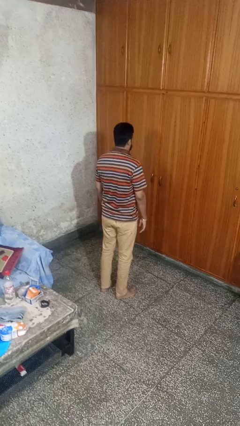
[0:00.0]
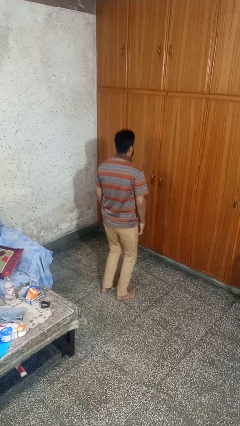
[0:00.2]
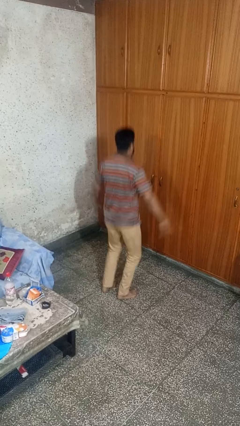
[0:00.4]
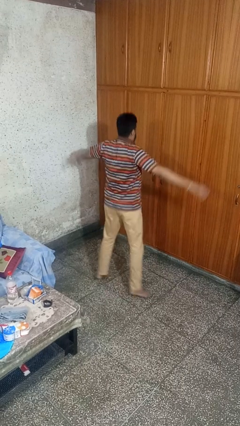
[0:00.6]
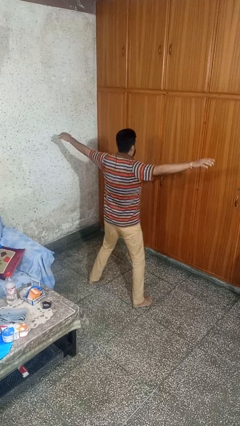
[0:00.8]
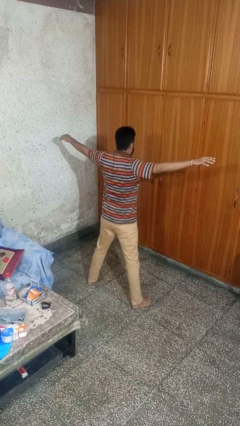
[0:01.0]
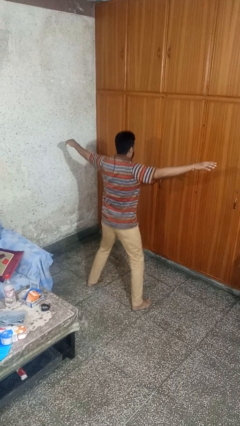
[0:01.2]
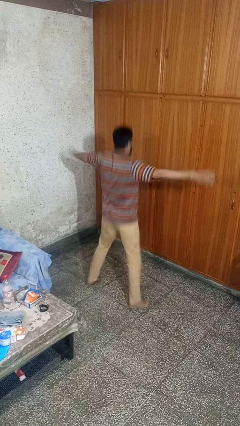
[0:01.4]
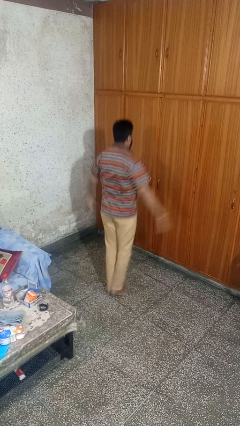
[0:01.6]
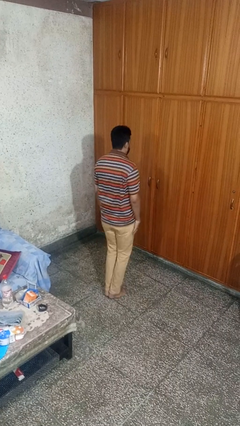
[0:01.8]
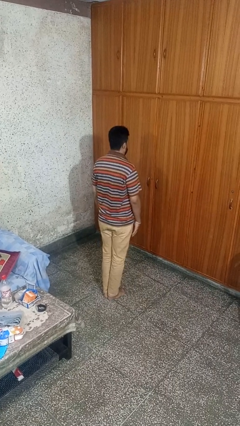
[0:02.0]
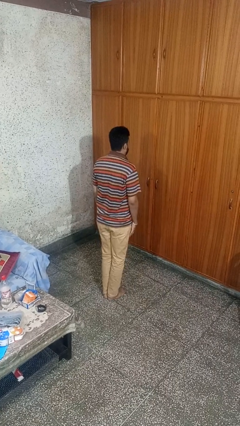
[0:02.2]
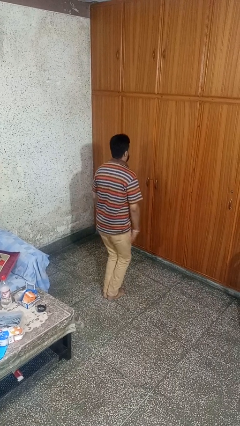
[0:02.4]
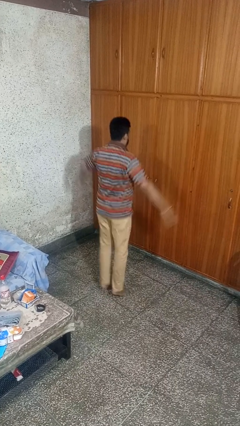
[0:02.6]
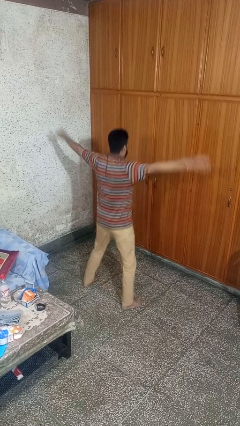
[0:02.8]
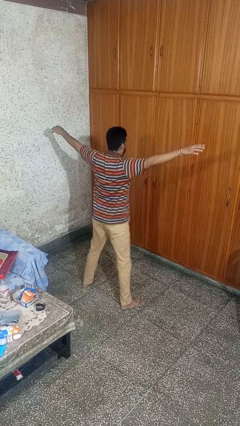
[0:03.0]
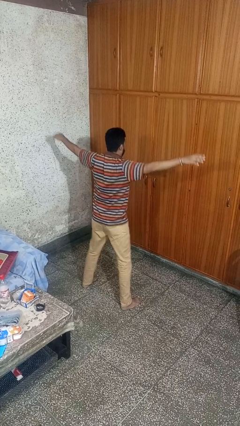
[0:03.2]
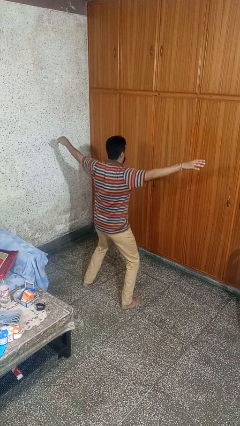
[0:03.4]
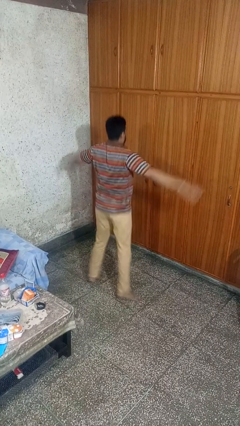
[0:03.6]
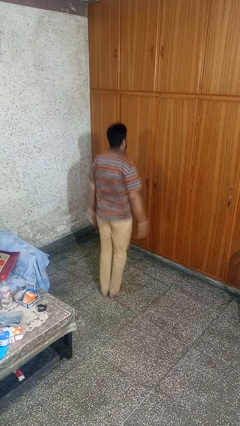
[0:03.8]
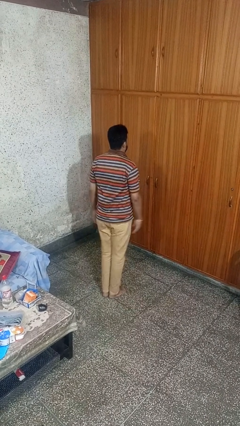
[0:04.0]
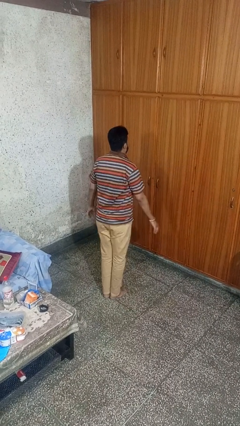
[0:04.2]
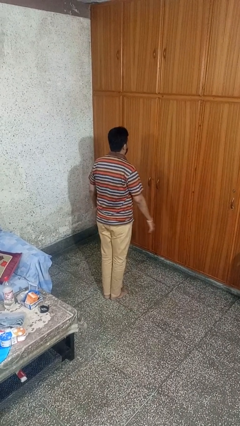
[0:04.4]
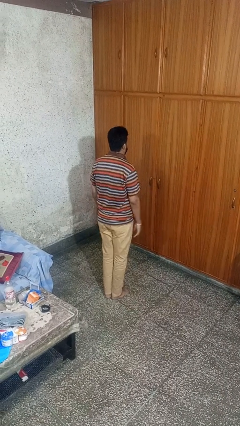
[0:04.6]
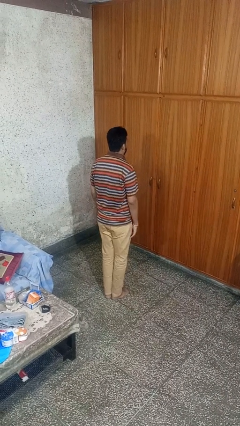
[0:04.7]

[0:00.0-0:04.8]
person exercises with jumping jacks

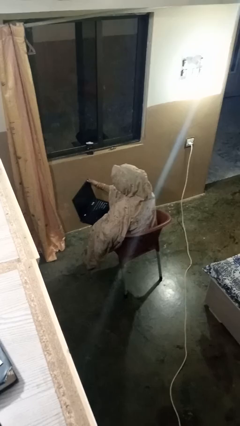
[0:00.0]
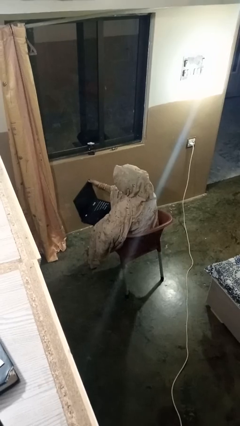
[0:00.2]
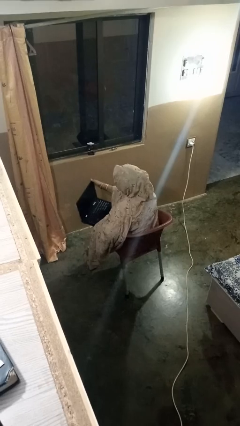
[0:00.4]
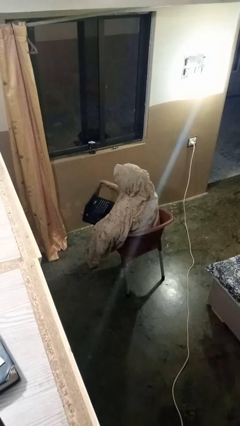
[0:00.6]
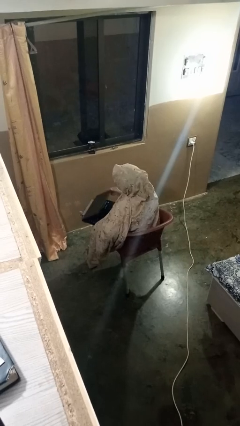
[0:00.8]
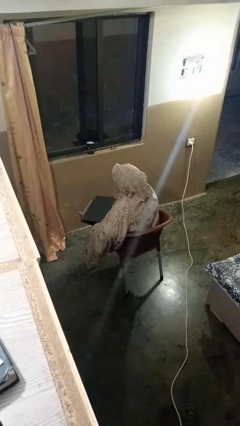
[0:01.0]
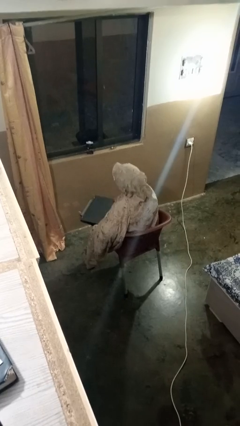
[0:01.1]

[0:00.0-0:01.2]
person closes laptop

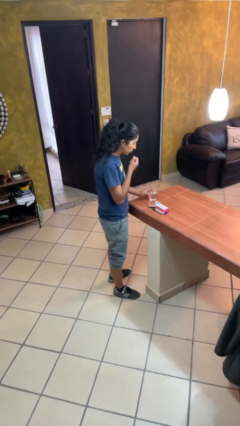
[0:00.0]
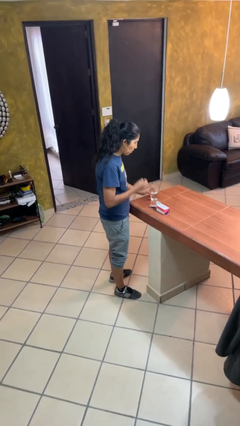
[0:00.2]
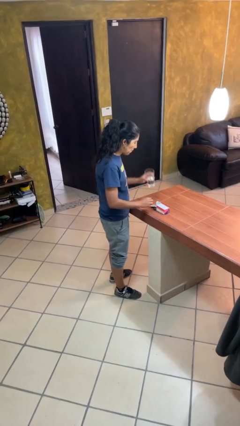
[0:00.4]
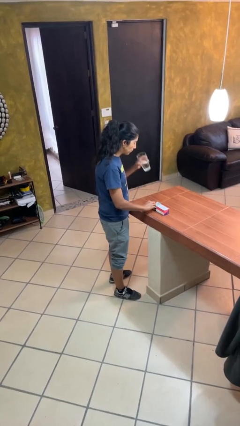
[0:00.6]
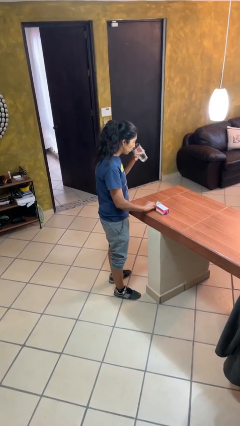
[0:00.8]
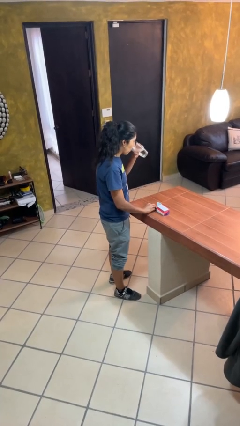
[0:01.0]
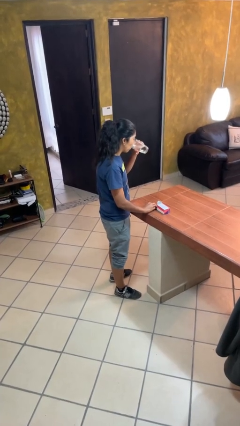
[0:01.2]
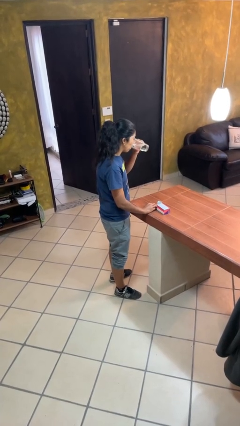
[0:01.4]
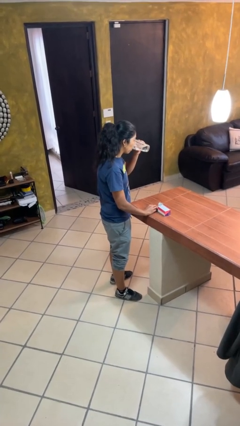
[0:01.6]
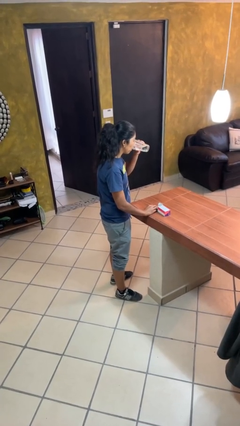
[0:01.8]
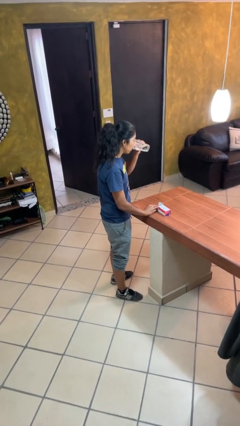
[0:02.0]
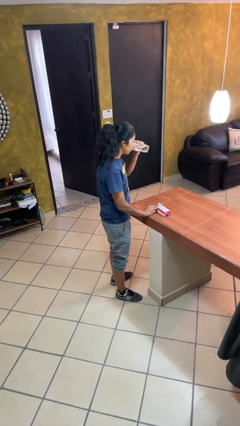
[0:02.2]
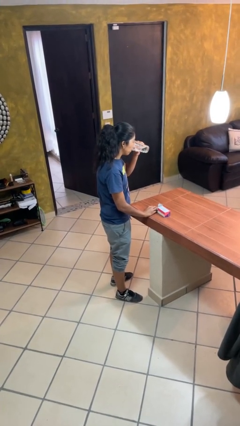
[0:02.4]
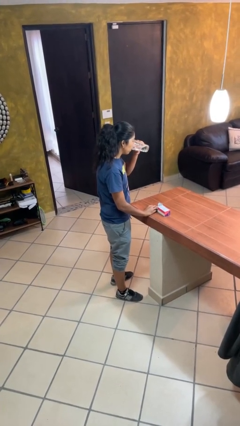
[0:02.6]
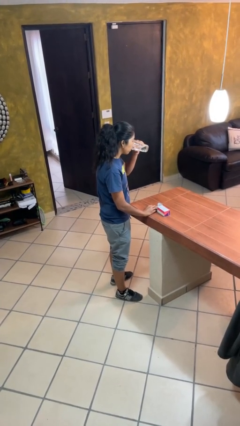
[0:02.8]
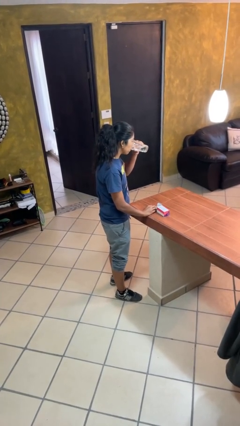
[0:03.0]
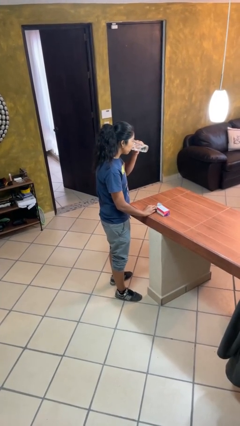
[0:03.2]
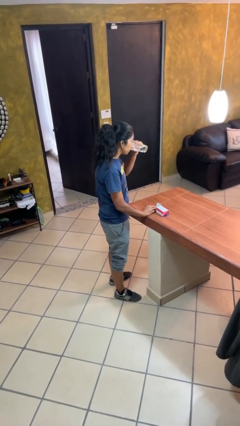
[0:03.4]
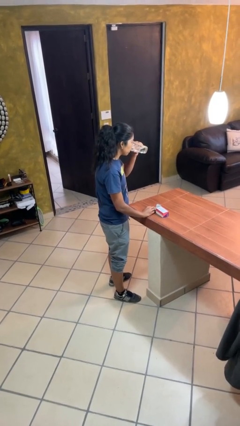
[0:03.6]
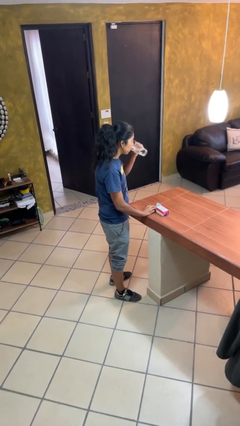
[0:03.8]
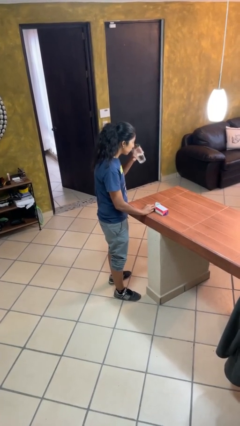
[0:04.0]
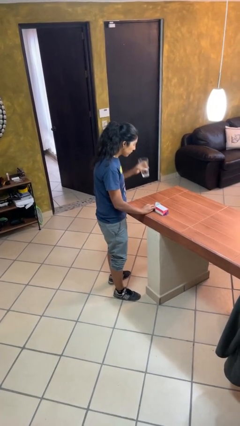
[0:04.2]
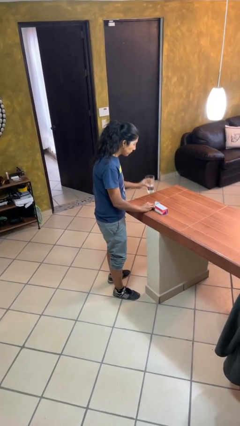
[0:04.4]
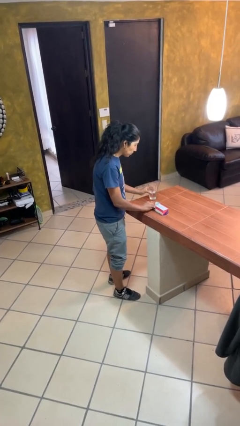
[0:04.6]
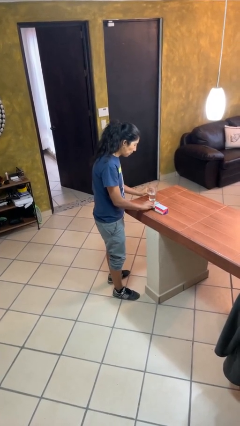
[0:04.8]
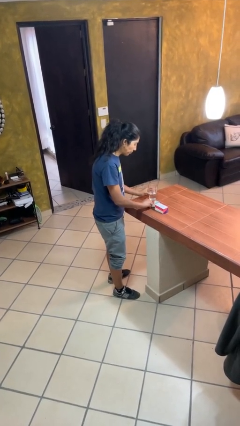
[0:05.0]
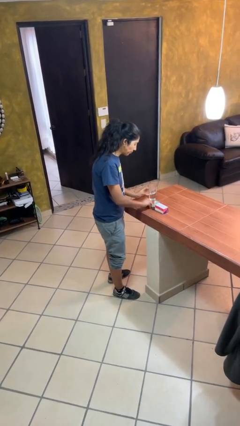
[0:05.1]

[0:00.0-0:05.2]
person drinks from cup

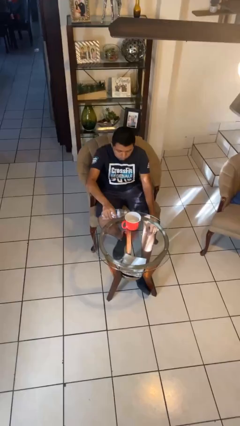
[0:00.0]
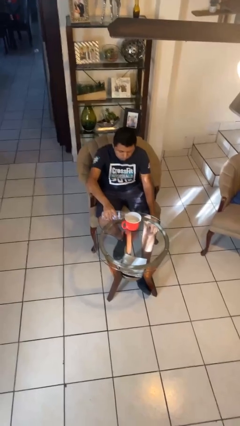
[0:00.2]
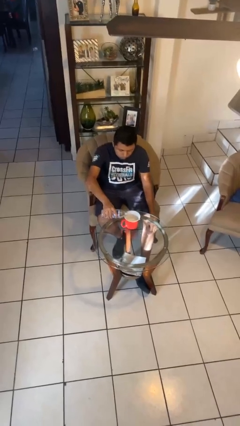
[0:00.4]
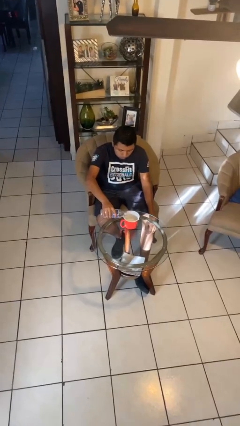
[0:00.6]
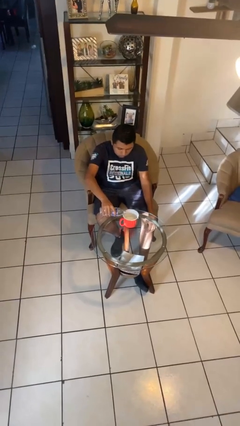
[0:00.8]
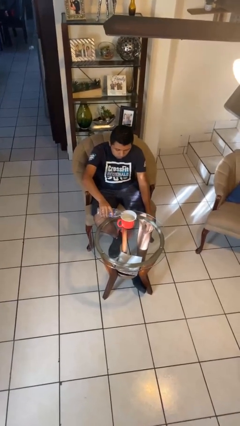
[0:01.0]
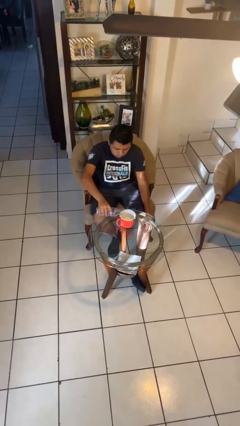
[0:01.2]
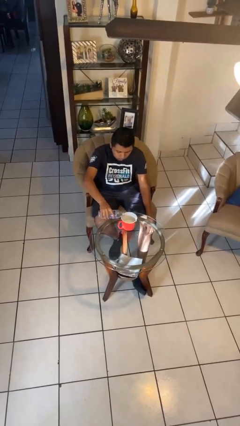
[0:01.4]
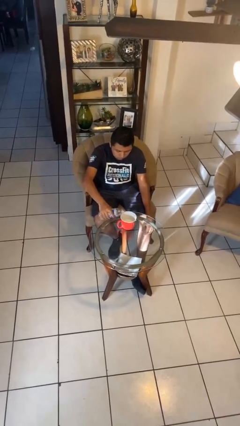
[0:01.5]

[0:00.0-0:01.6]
person pours liquid into cup

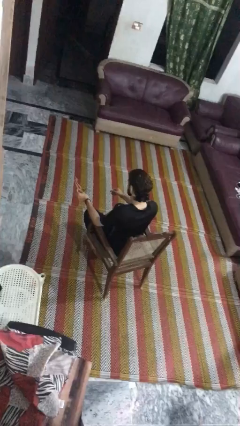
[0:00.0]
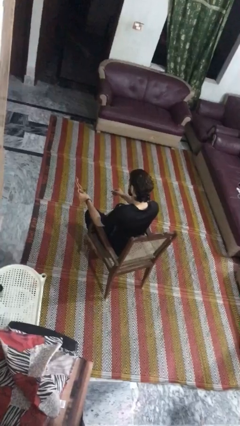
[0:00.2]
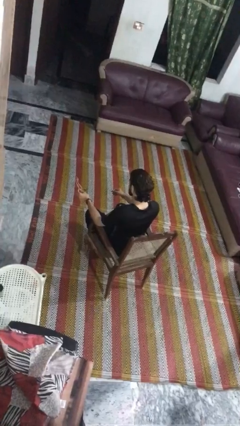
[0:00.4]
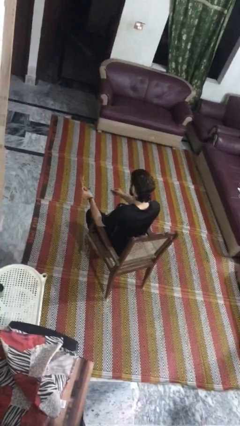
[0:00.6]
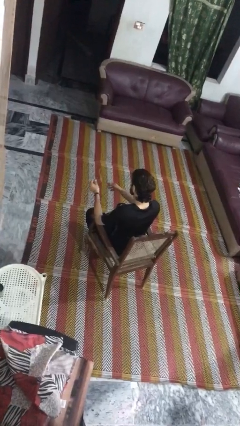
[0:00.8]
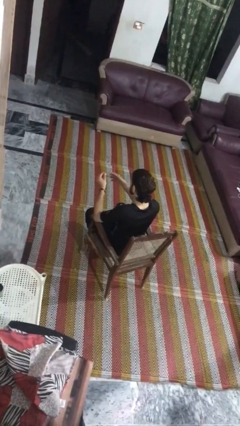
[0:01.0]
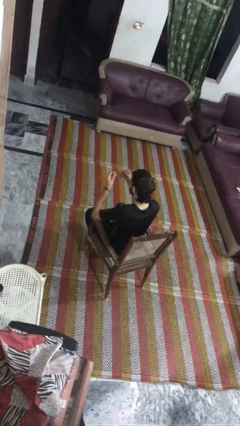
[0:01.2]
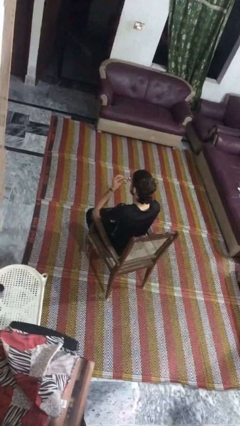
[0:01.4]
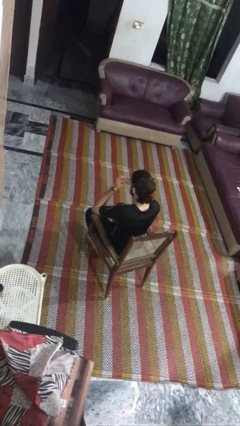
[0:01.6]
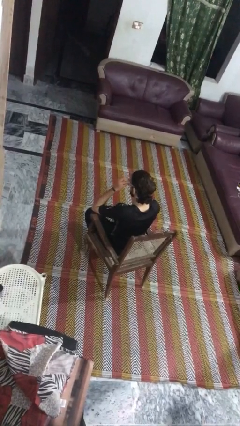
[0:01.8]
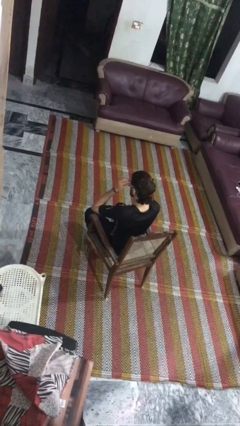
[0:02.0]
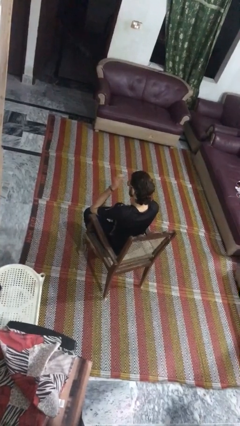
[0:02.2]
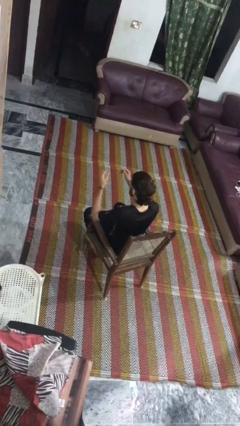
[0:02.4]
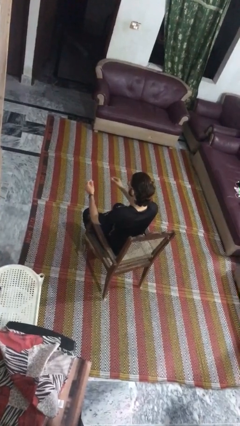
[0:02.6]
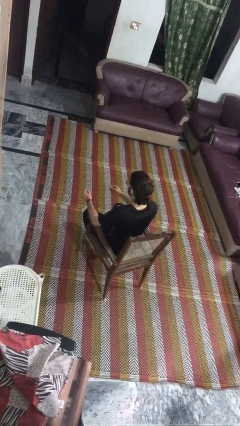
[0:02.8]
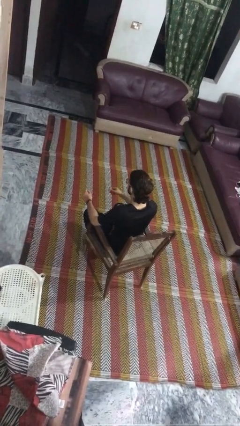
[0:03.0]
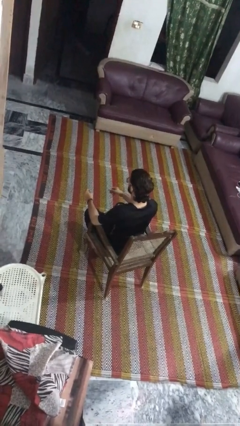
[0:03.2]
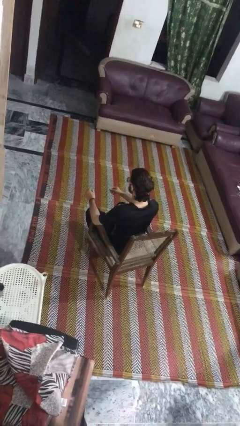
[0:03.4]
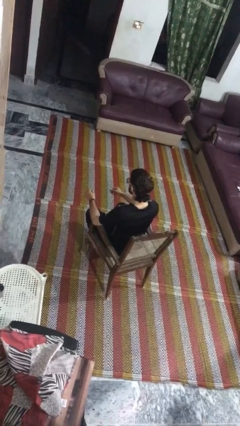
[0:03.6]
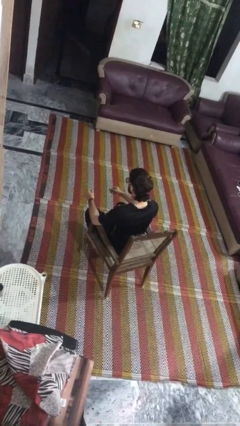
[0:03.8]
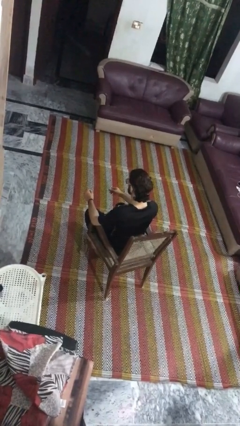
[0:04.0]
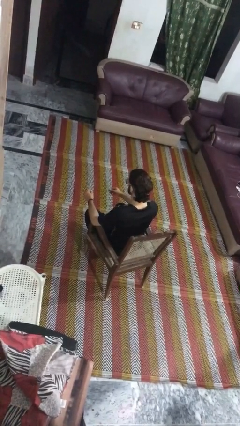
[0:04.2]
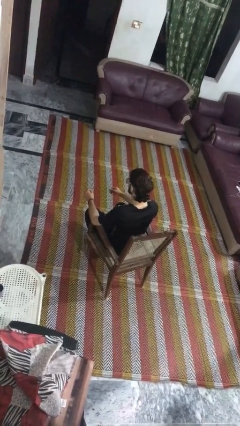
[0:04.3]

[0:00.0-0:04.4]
person puts on glasses

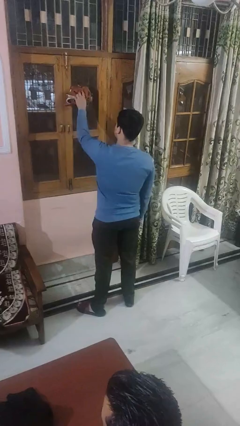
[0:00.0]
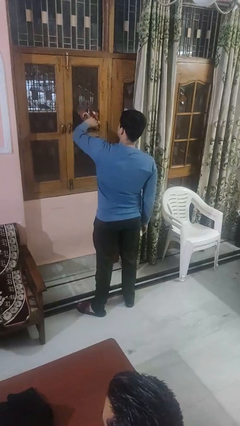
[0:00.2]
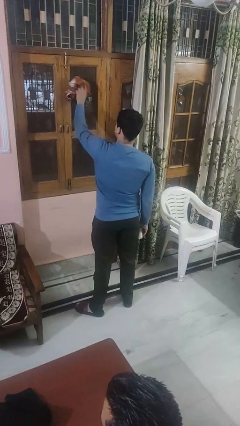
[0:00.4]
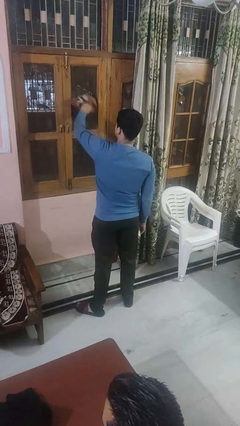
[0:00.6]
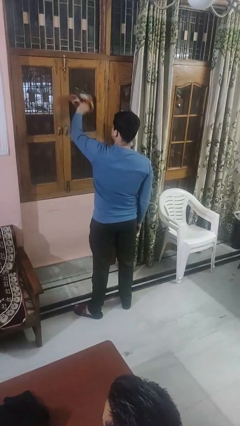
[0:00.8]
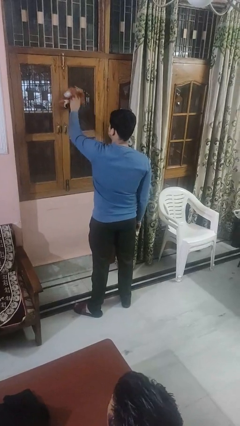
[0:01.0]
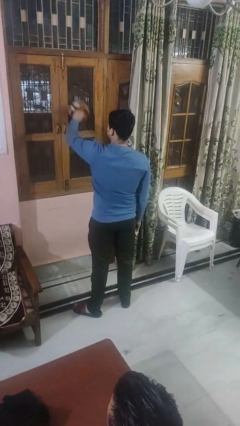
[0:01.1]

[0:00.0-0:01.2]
person washes window
